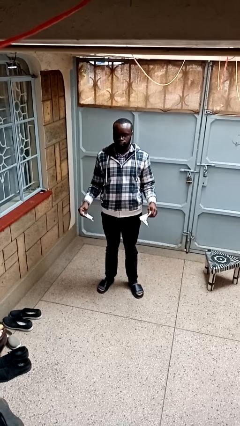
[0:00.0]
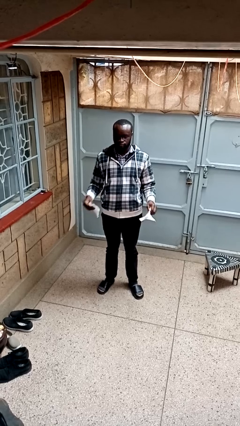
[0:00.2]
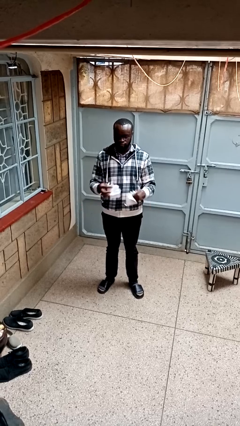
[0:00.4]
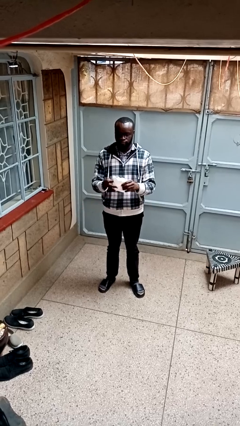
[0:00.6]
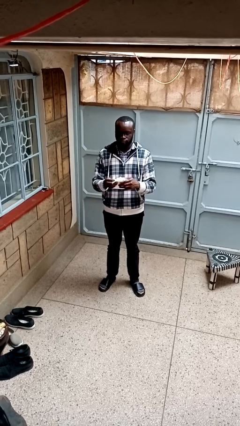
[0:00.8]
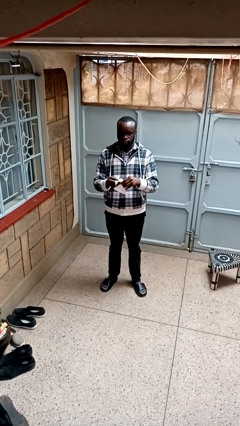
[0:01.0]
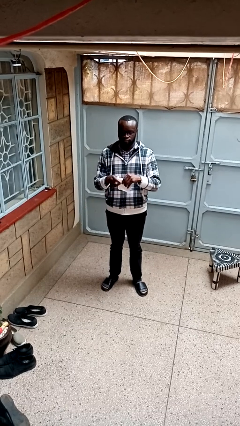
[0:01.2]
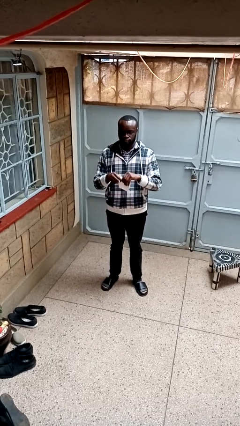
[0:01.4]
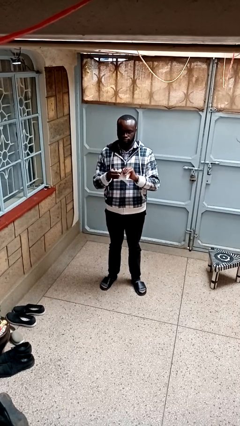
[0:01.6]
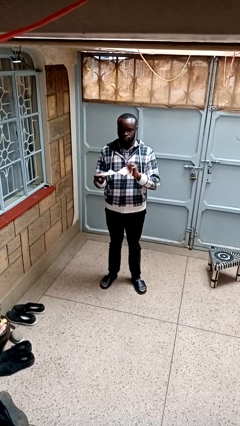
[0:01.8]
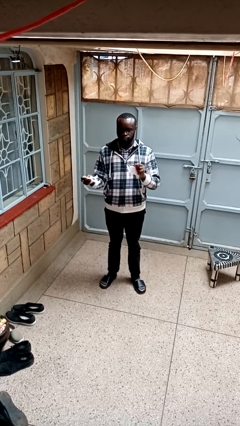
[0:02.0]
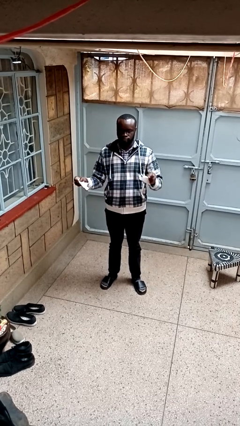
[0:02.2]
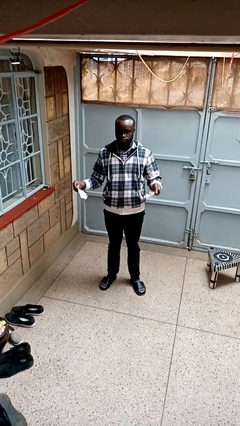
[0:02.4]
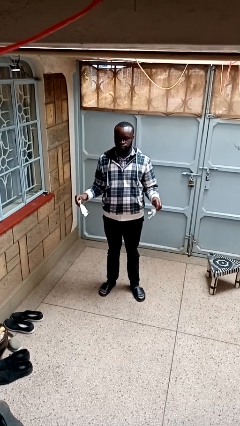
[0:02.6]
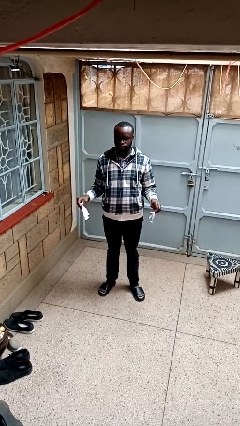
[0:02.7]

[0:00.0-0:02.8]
person tears paper

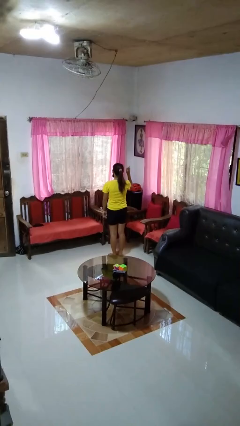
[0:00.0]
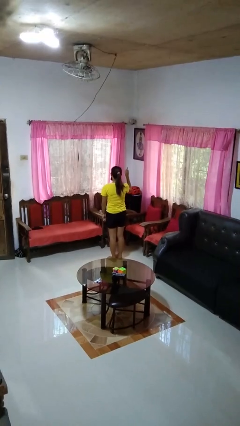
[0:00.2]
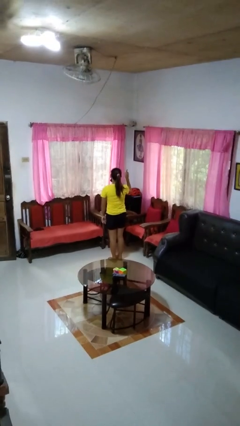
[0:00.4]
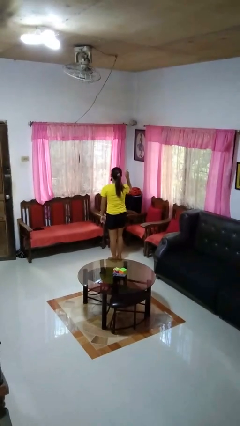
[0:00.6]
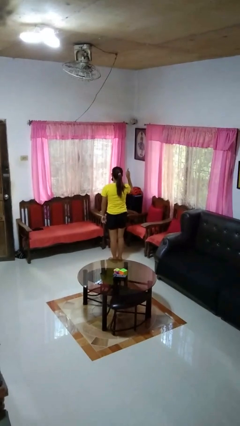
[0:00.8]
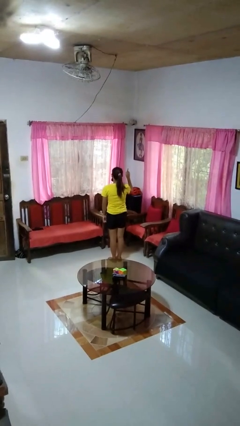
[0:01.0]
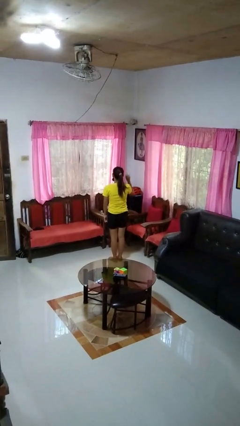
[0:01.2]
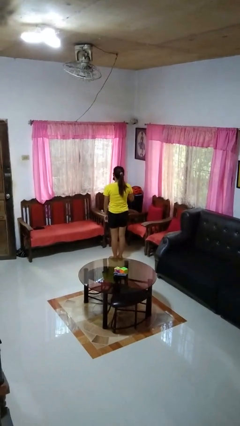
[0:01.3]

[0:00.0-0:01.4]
person gestures number one

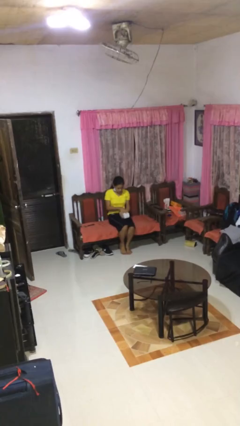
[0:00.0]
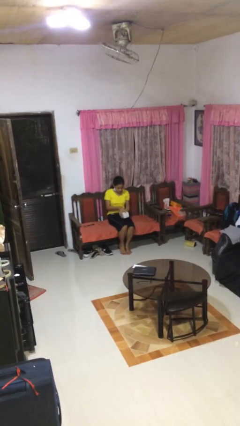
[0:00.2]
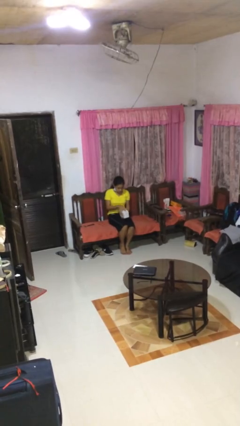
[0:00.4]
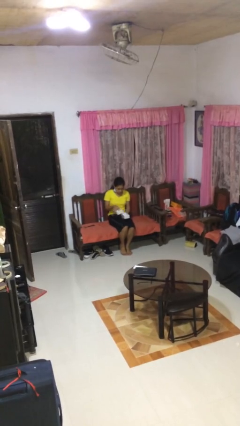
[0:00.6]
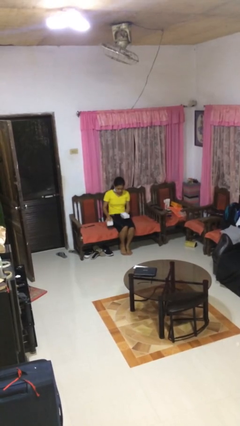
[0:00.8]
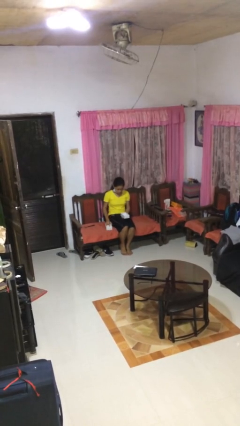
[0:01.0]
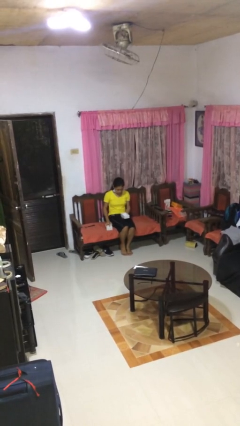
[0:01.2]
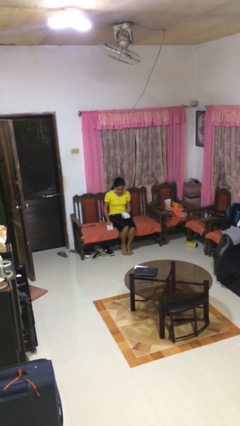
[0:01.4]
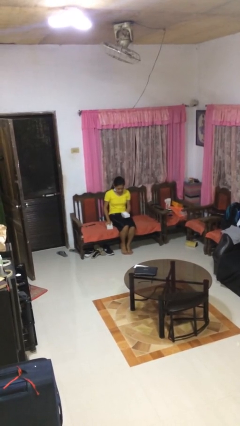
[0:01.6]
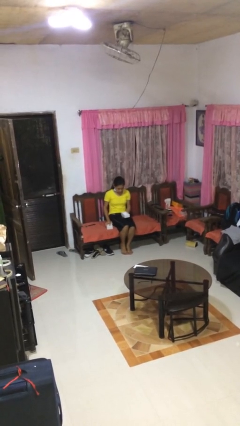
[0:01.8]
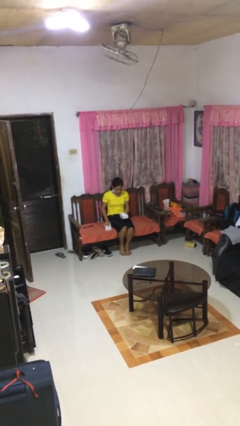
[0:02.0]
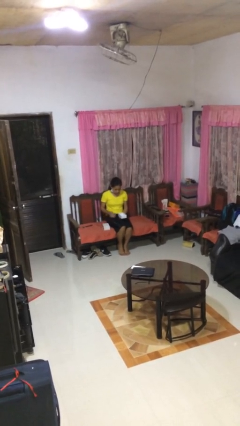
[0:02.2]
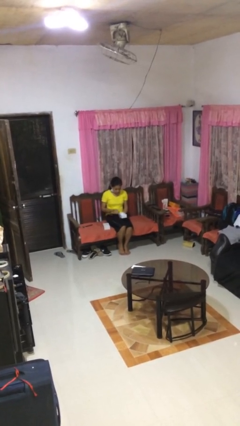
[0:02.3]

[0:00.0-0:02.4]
person opens jewelry box

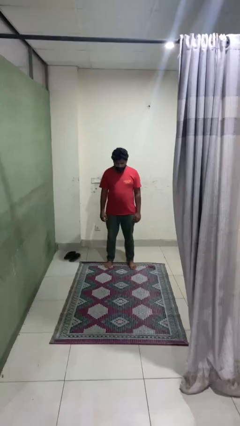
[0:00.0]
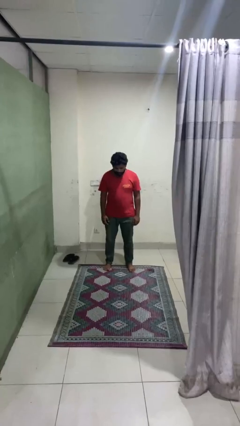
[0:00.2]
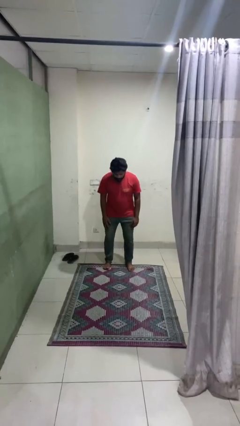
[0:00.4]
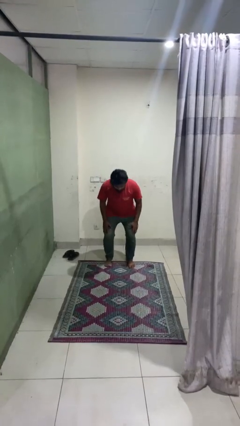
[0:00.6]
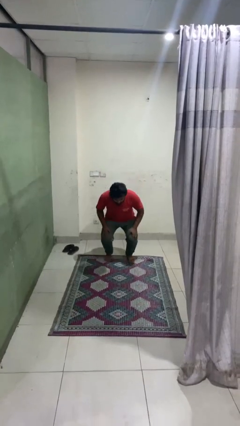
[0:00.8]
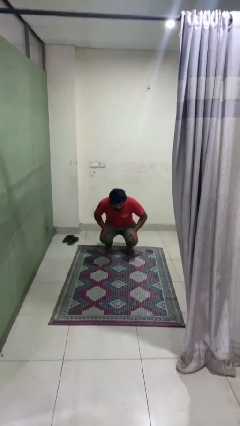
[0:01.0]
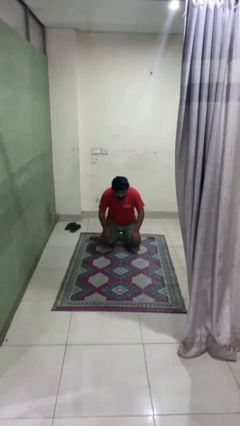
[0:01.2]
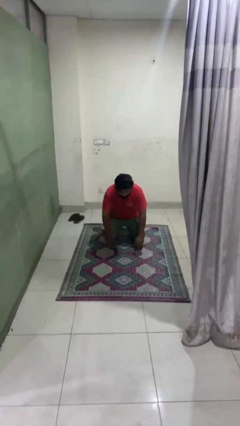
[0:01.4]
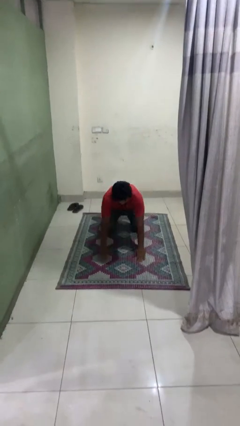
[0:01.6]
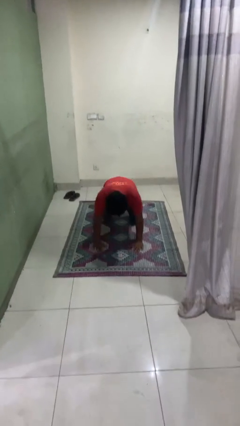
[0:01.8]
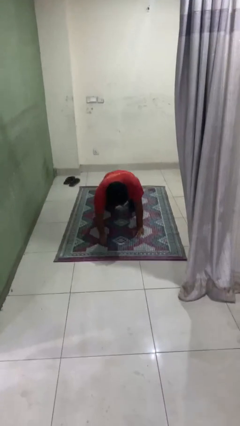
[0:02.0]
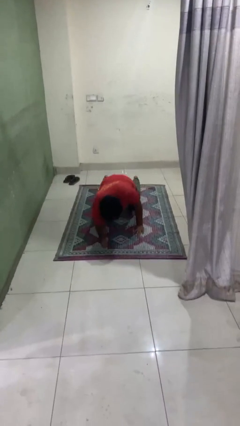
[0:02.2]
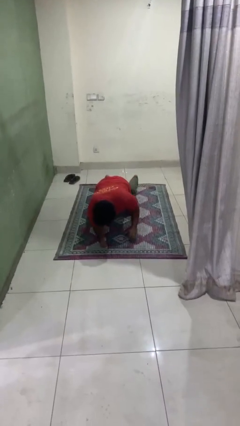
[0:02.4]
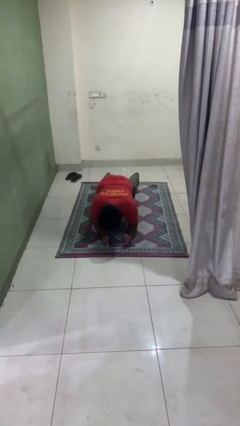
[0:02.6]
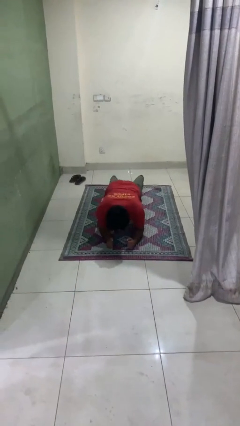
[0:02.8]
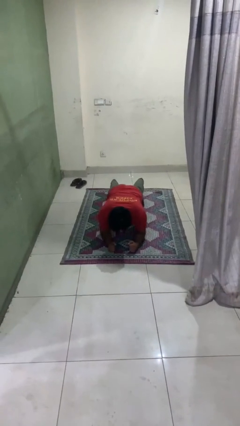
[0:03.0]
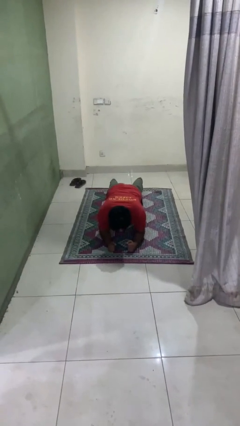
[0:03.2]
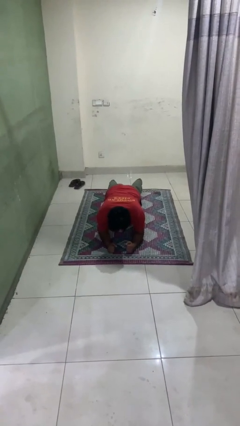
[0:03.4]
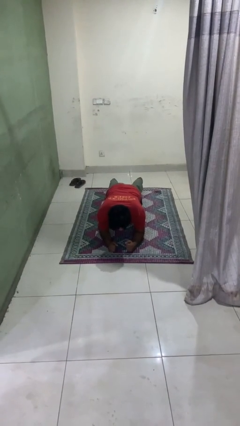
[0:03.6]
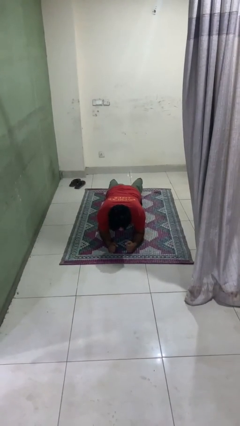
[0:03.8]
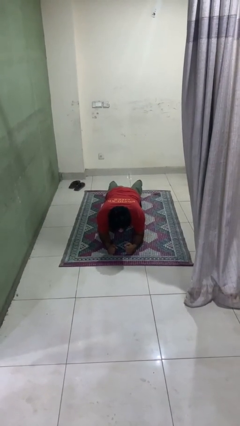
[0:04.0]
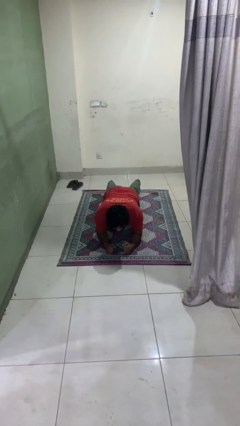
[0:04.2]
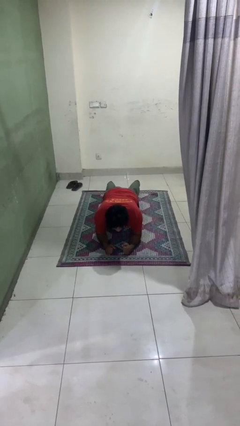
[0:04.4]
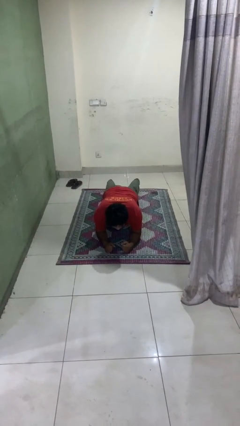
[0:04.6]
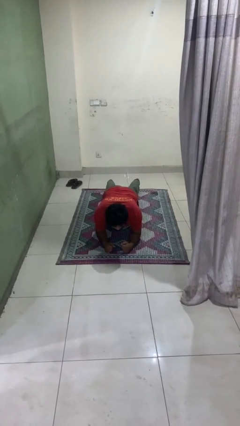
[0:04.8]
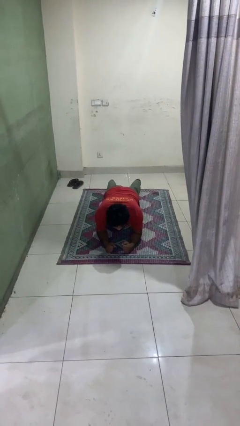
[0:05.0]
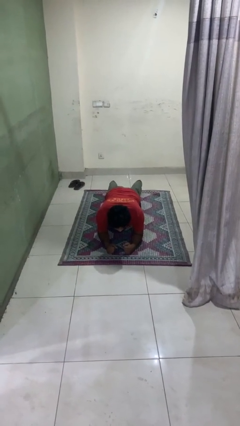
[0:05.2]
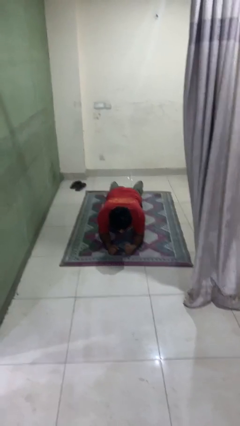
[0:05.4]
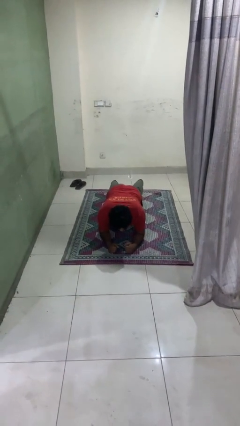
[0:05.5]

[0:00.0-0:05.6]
person exercises with plank

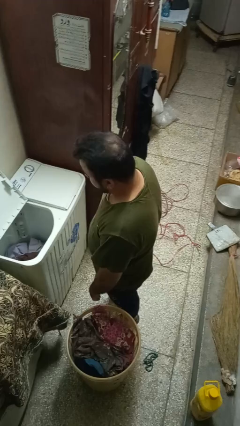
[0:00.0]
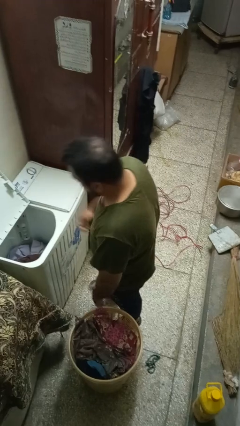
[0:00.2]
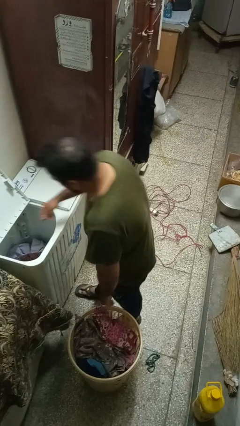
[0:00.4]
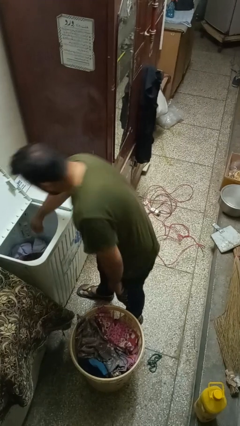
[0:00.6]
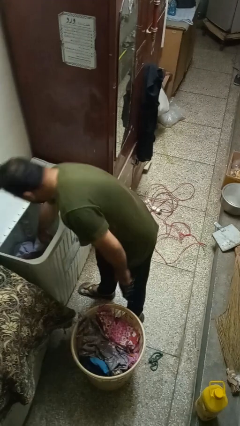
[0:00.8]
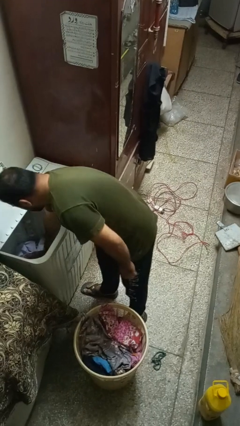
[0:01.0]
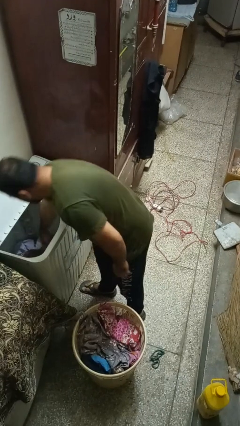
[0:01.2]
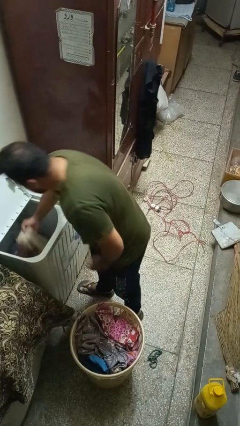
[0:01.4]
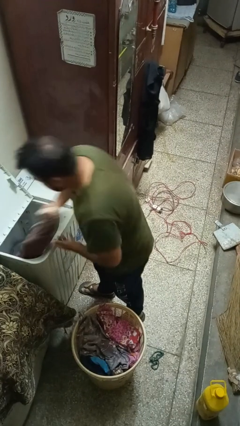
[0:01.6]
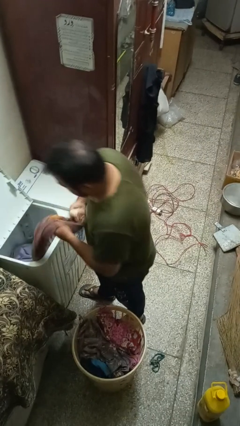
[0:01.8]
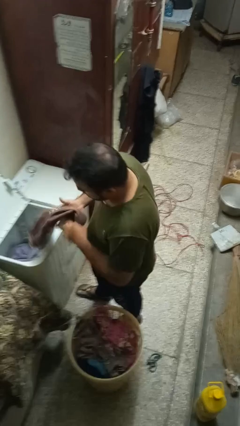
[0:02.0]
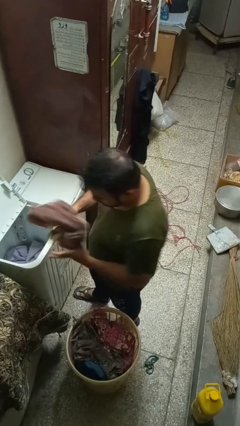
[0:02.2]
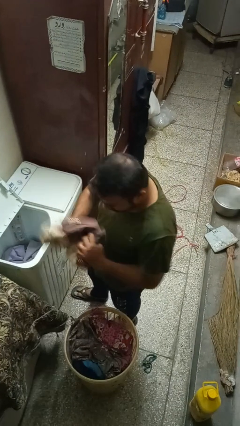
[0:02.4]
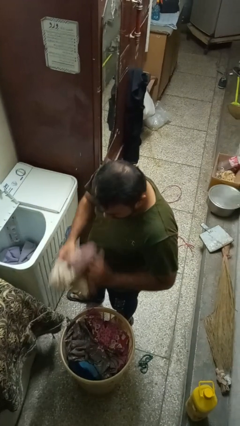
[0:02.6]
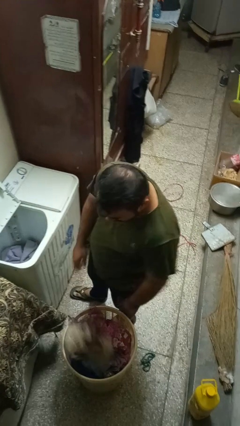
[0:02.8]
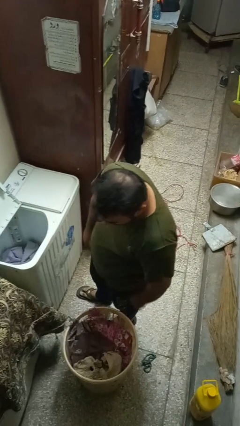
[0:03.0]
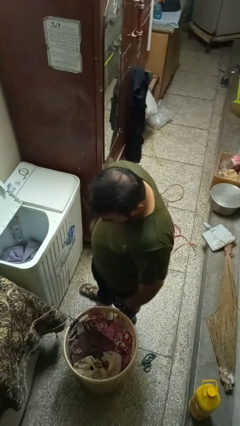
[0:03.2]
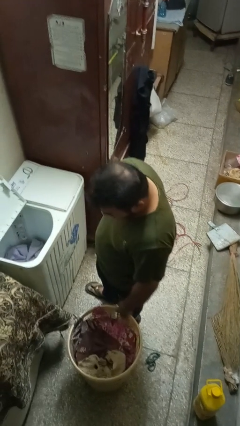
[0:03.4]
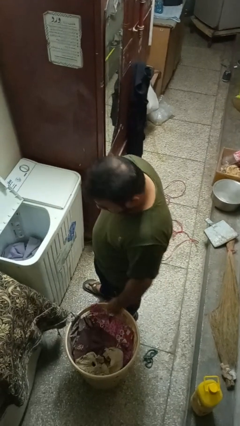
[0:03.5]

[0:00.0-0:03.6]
person unloads clotheswasher

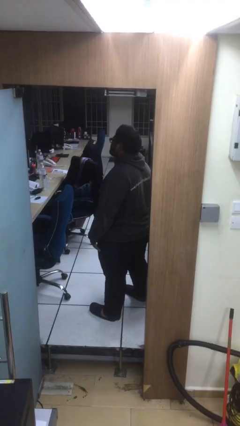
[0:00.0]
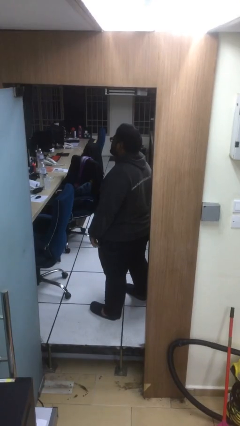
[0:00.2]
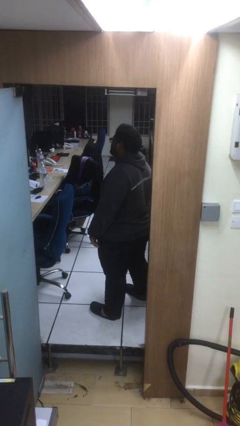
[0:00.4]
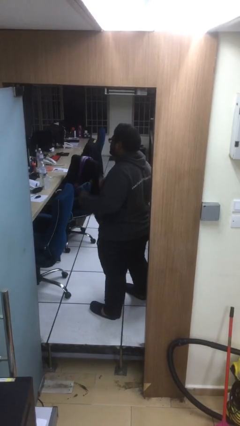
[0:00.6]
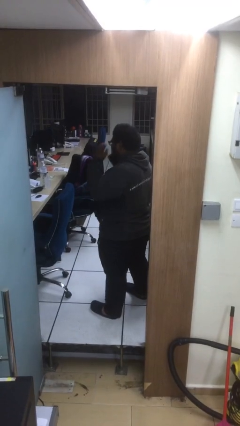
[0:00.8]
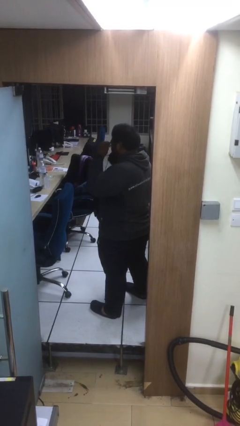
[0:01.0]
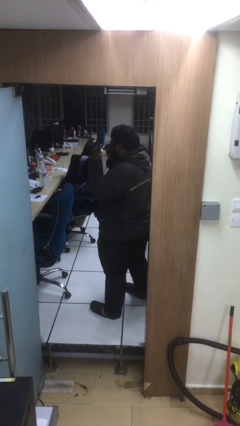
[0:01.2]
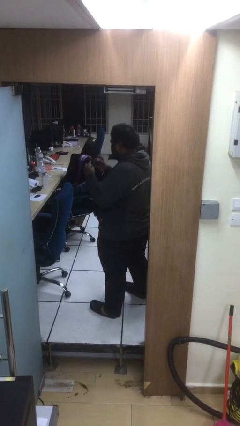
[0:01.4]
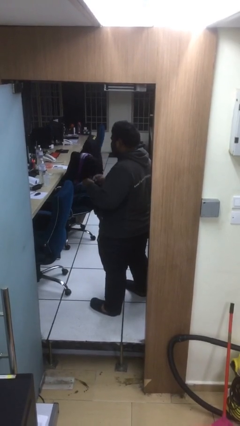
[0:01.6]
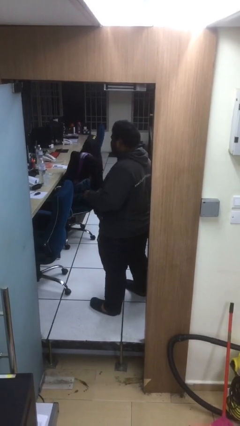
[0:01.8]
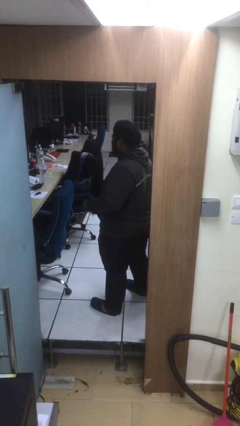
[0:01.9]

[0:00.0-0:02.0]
person takes off glasses
